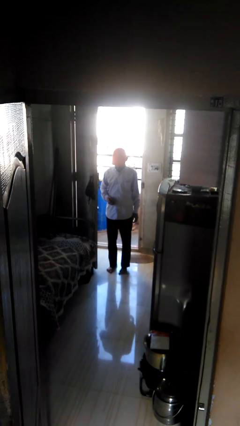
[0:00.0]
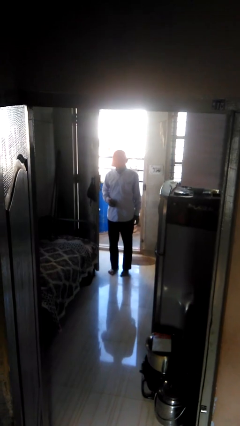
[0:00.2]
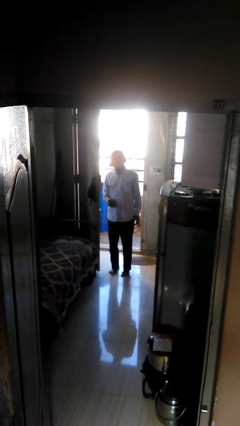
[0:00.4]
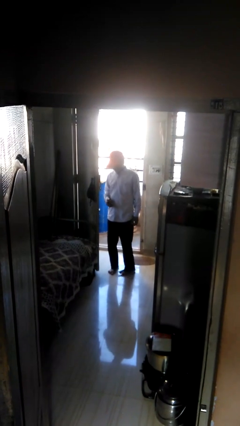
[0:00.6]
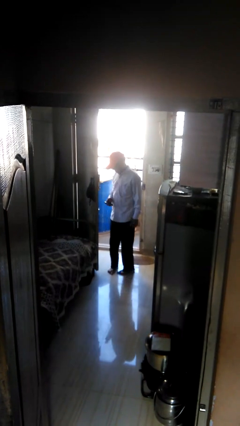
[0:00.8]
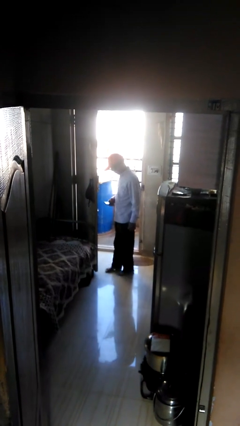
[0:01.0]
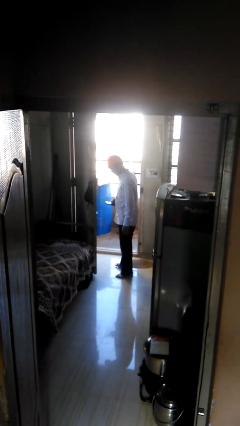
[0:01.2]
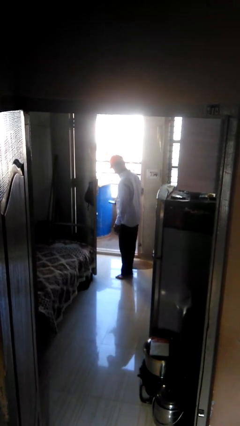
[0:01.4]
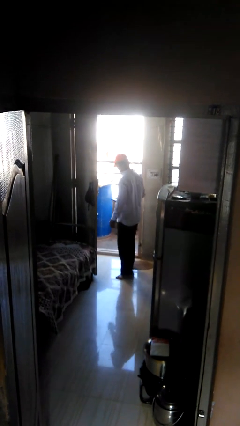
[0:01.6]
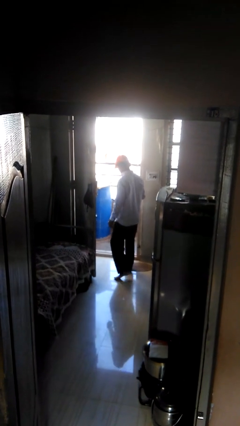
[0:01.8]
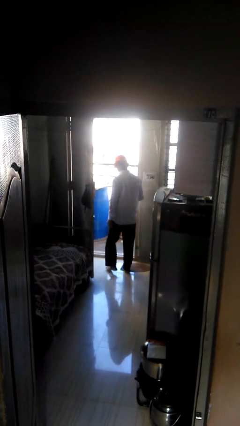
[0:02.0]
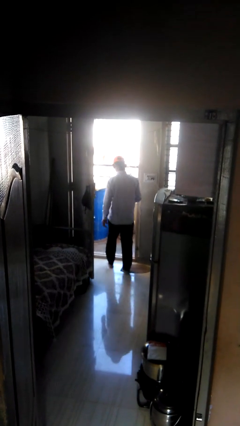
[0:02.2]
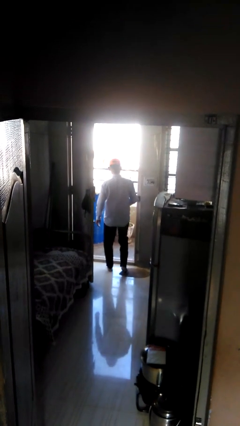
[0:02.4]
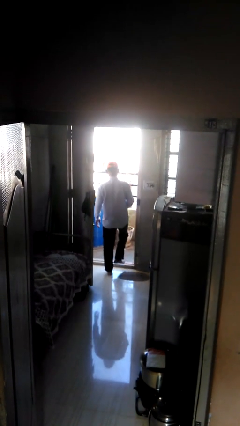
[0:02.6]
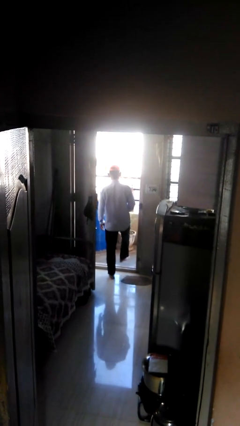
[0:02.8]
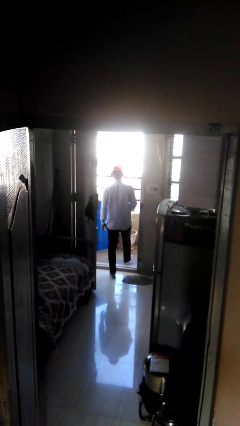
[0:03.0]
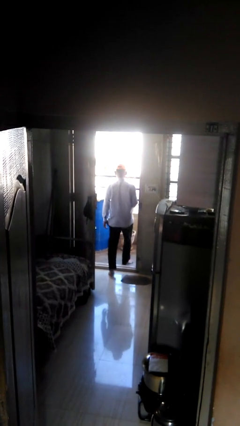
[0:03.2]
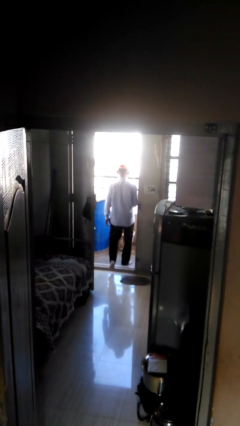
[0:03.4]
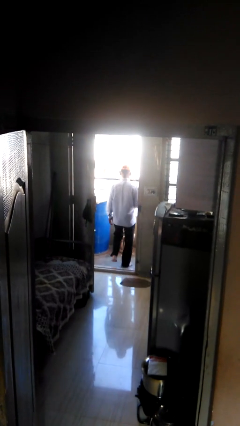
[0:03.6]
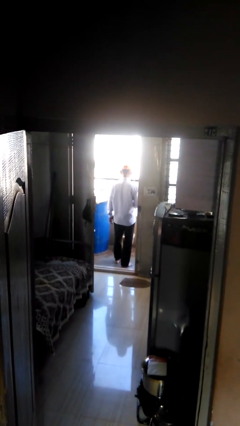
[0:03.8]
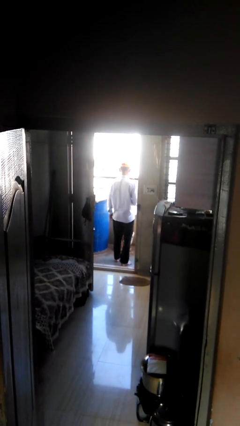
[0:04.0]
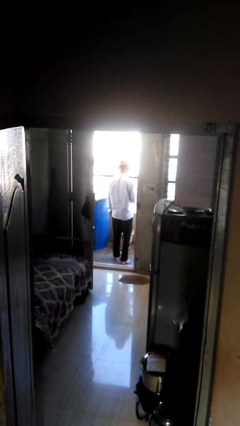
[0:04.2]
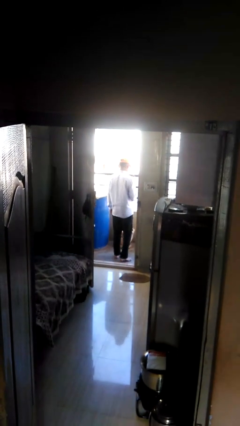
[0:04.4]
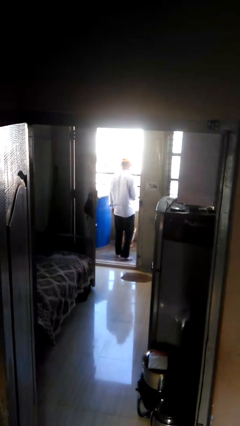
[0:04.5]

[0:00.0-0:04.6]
person exits scene through structure

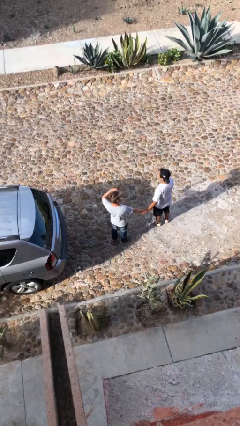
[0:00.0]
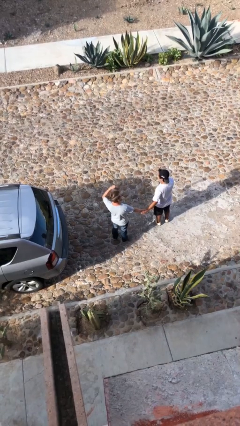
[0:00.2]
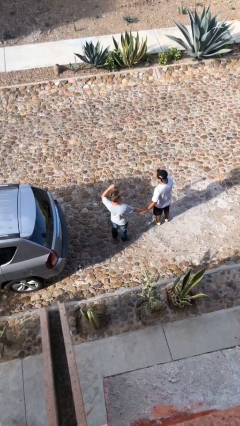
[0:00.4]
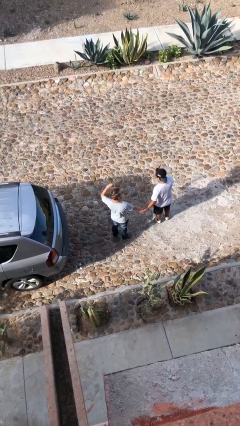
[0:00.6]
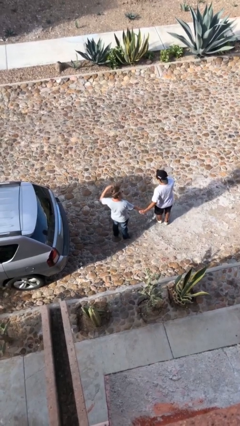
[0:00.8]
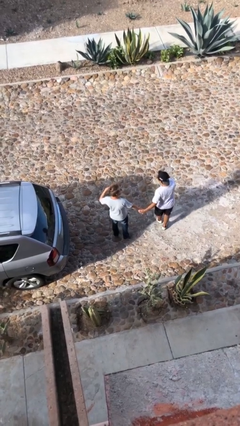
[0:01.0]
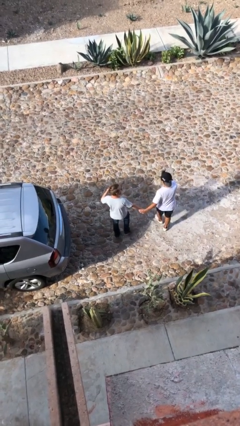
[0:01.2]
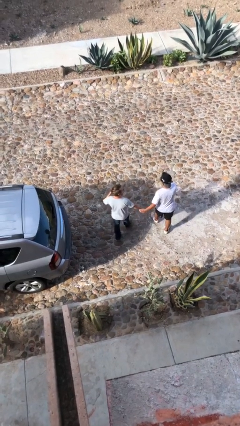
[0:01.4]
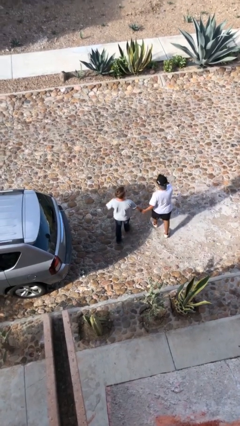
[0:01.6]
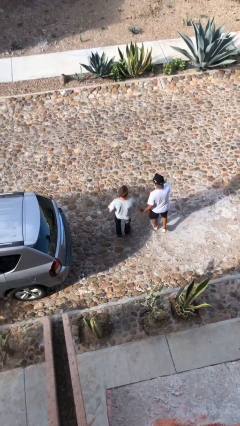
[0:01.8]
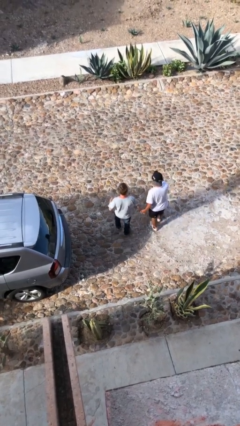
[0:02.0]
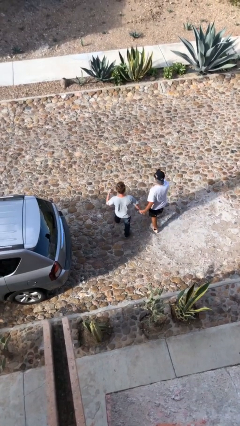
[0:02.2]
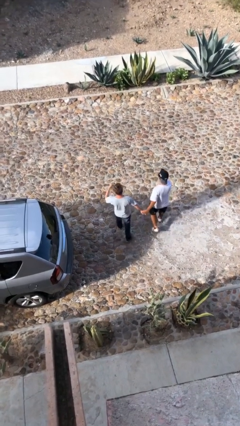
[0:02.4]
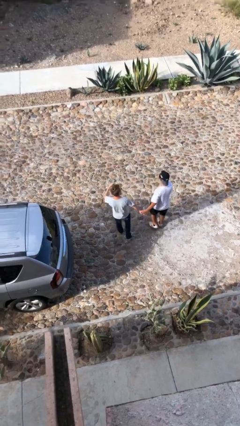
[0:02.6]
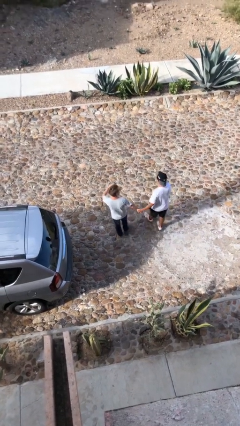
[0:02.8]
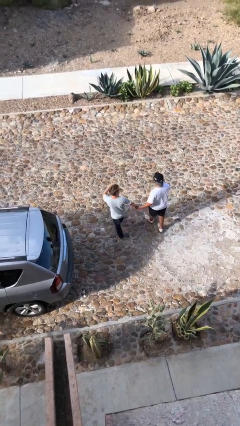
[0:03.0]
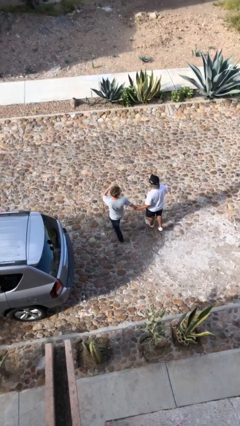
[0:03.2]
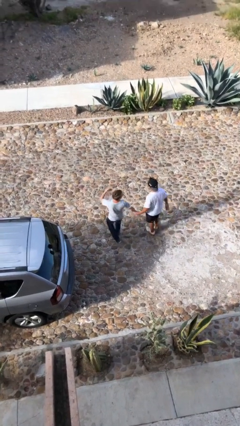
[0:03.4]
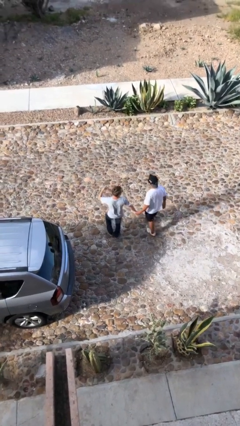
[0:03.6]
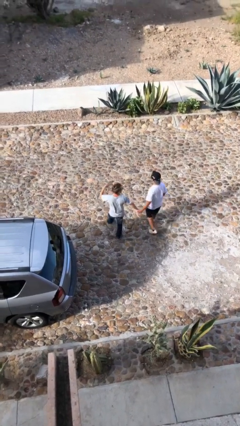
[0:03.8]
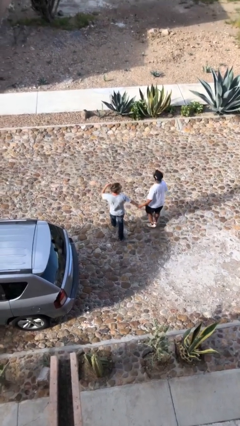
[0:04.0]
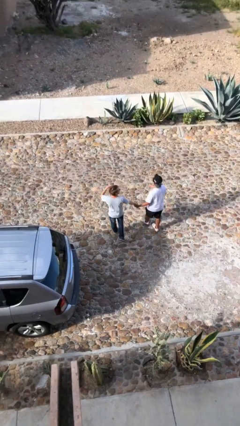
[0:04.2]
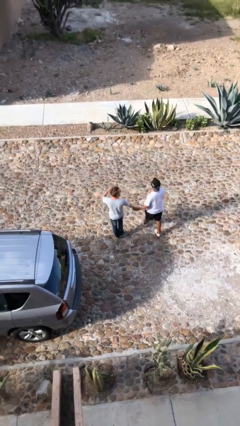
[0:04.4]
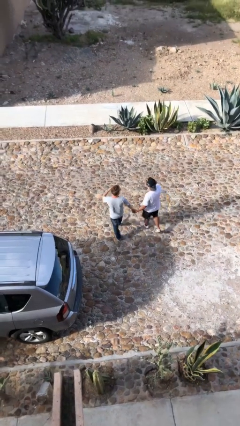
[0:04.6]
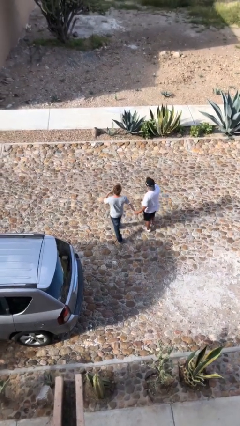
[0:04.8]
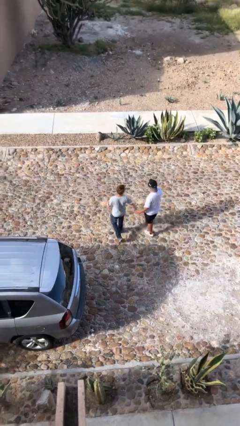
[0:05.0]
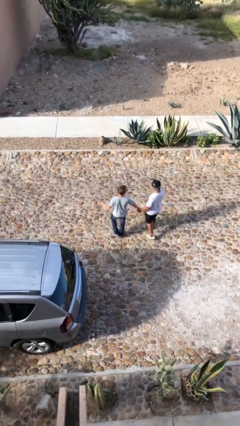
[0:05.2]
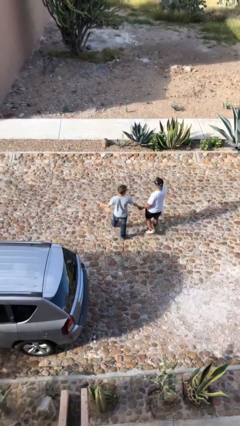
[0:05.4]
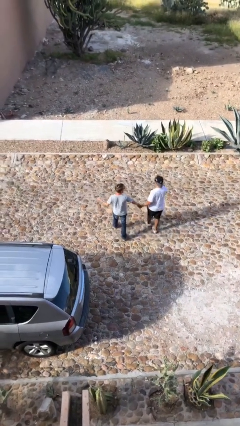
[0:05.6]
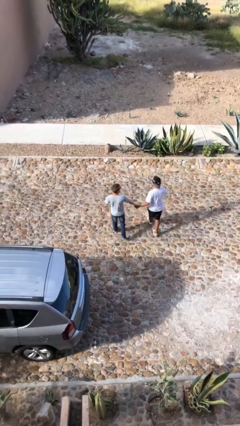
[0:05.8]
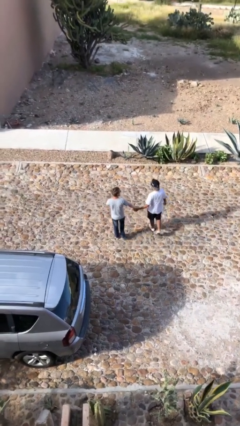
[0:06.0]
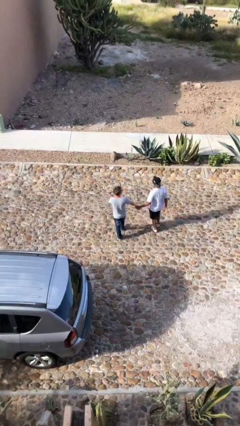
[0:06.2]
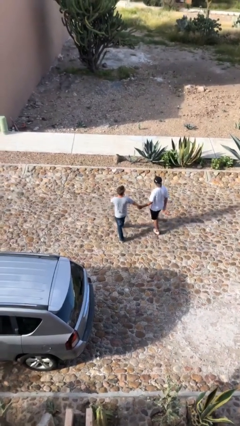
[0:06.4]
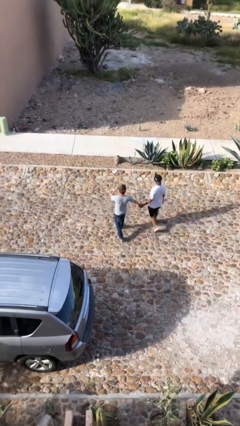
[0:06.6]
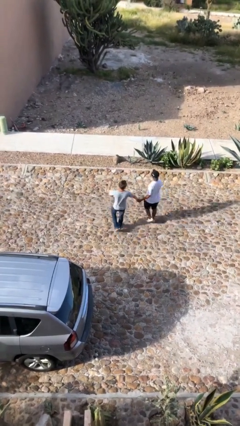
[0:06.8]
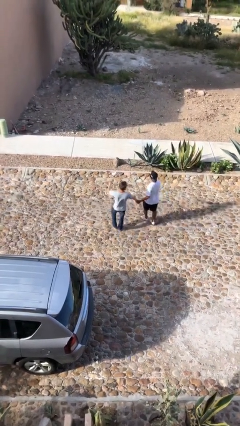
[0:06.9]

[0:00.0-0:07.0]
person holds hand

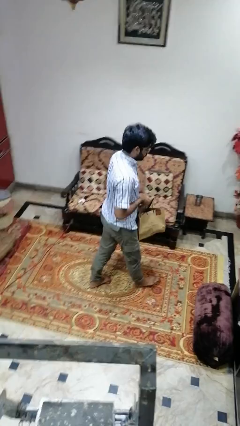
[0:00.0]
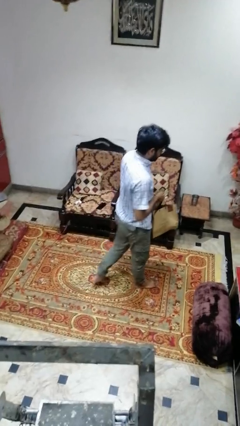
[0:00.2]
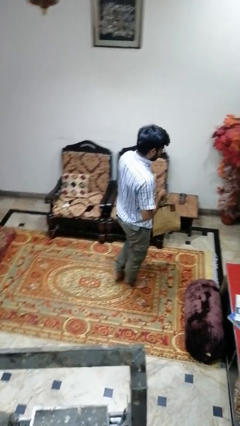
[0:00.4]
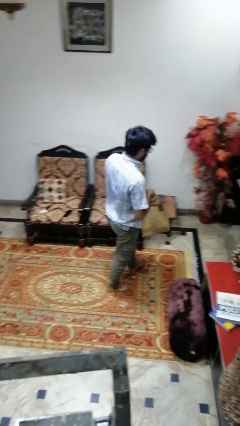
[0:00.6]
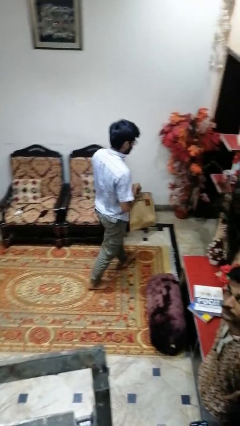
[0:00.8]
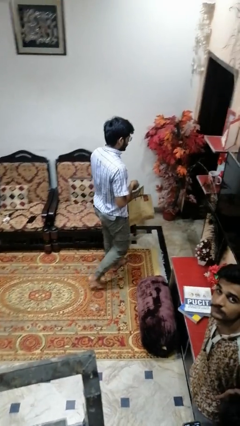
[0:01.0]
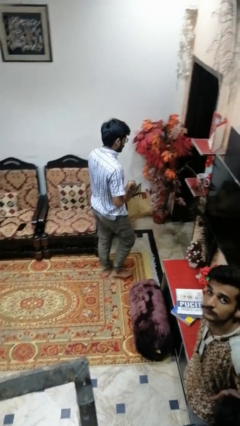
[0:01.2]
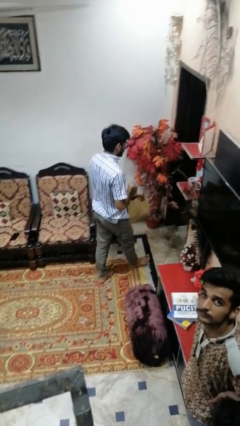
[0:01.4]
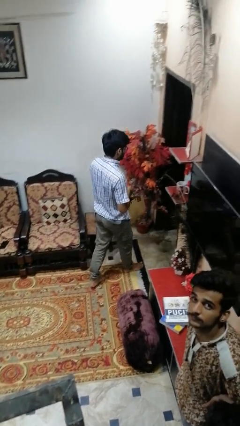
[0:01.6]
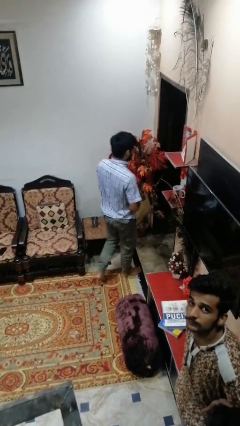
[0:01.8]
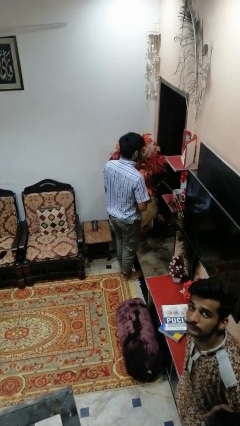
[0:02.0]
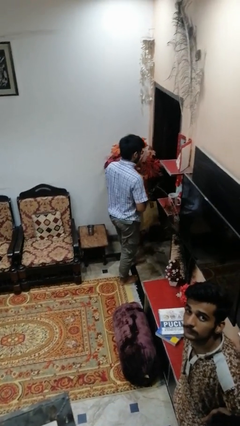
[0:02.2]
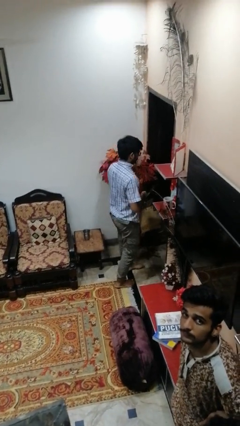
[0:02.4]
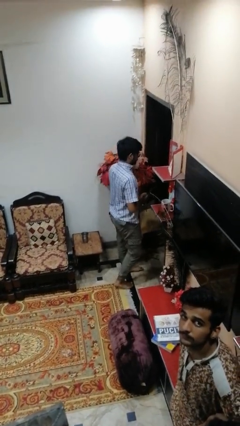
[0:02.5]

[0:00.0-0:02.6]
person carries groceries

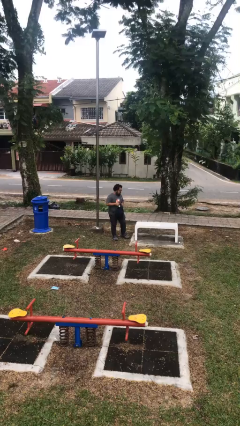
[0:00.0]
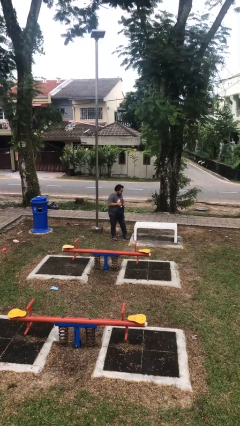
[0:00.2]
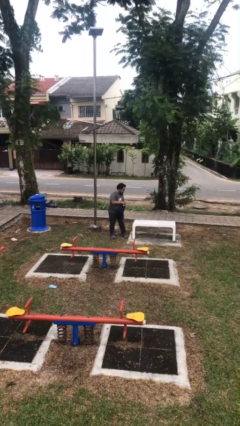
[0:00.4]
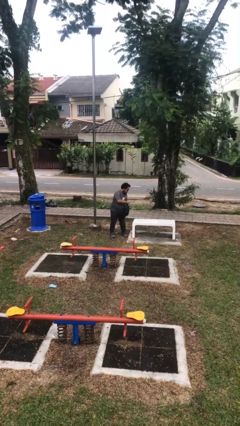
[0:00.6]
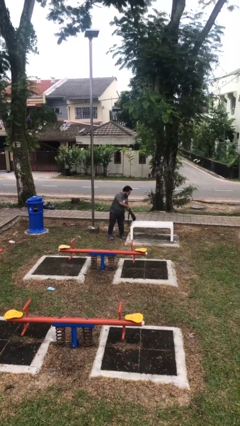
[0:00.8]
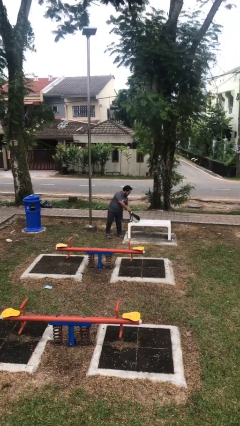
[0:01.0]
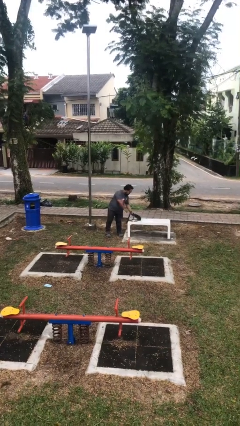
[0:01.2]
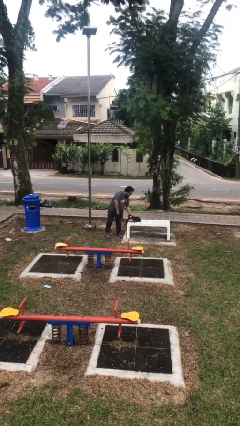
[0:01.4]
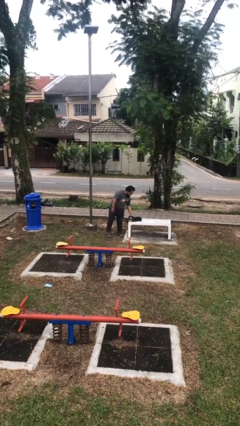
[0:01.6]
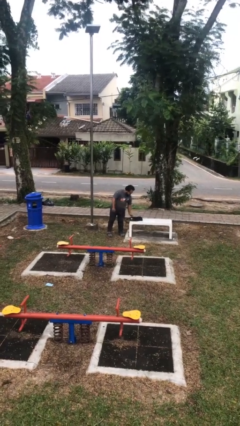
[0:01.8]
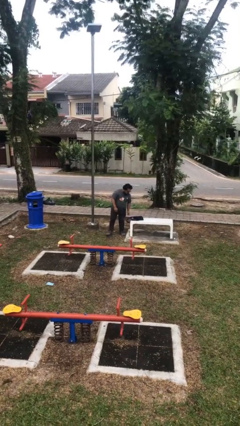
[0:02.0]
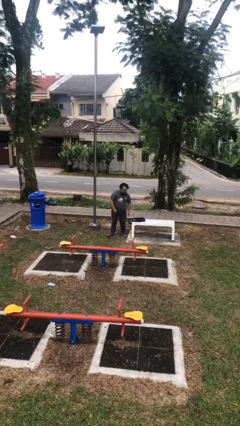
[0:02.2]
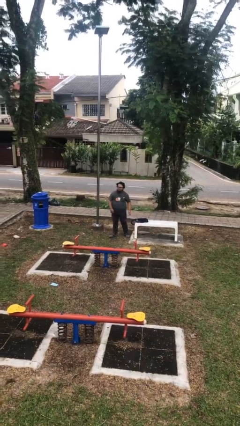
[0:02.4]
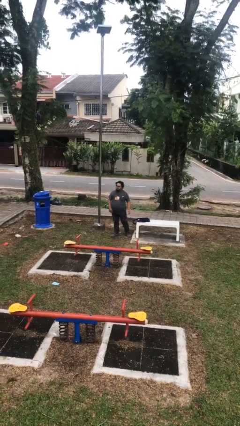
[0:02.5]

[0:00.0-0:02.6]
person puts down object on table

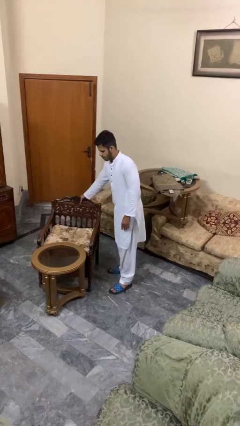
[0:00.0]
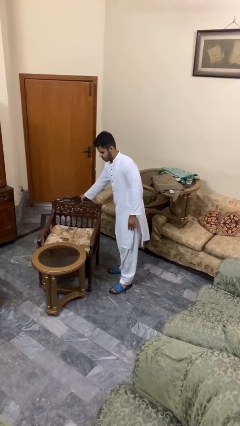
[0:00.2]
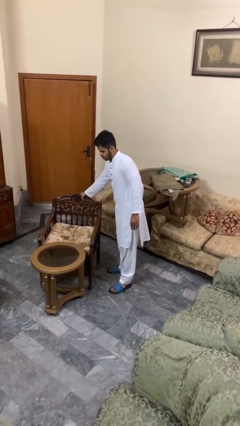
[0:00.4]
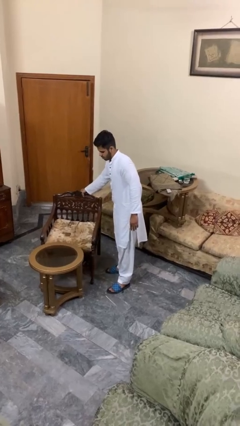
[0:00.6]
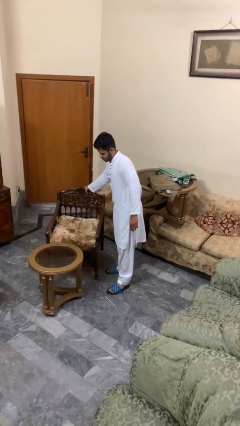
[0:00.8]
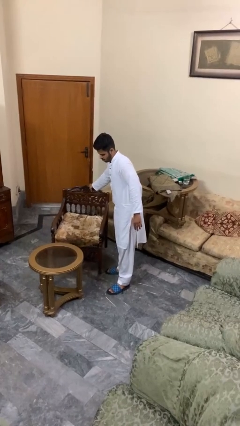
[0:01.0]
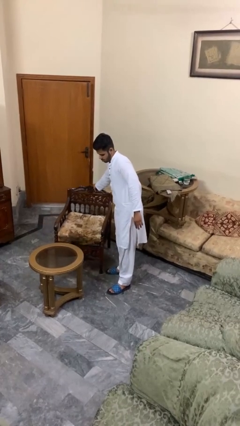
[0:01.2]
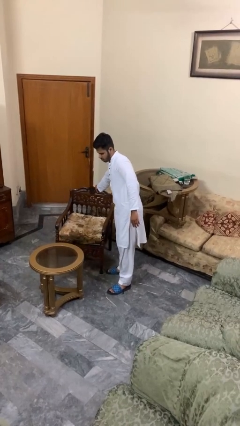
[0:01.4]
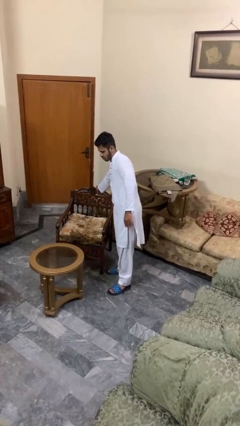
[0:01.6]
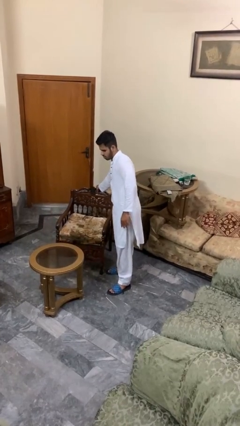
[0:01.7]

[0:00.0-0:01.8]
person pulls out chair
